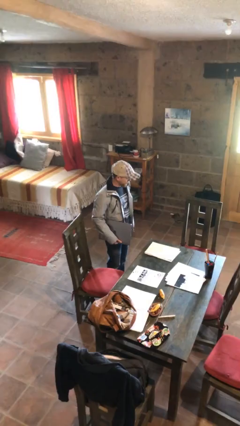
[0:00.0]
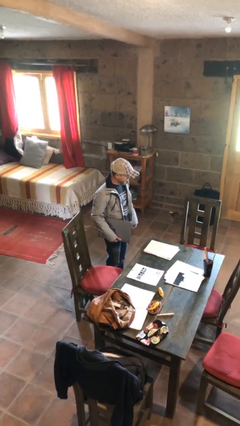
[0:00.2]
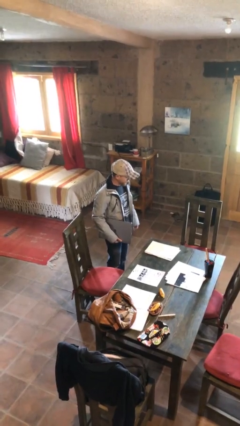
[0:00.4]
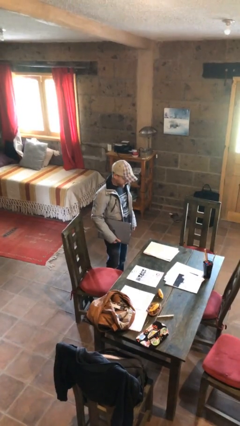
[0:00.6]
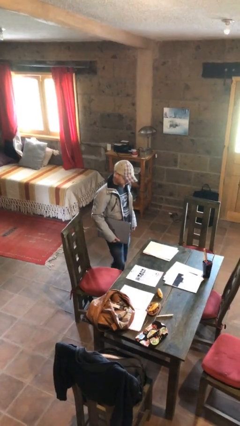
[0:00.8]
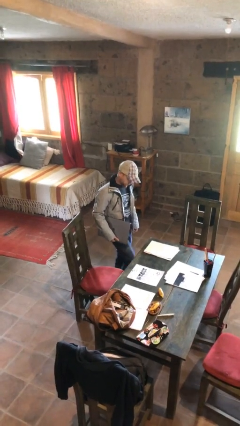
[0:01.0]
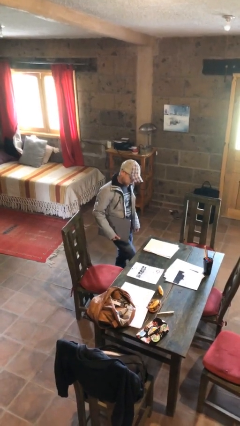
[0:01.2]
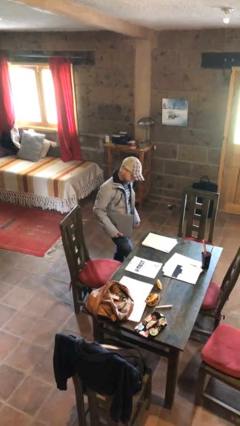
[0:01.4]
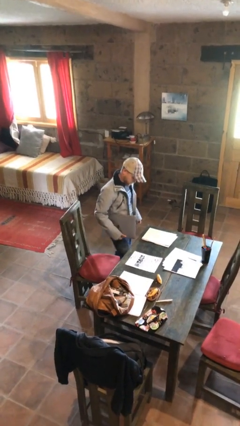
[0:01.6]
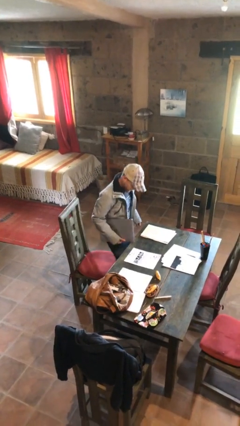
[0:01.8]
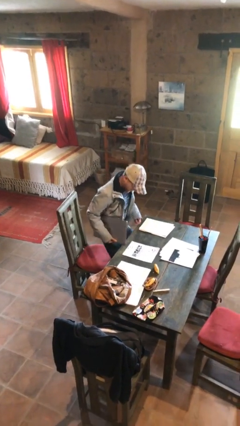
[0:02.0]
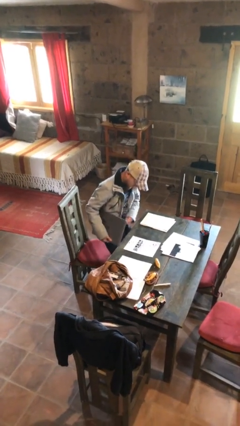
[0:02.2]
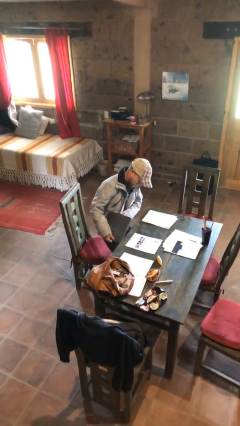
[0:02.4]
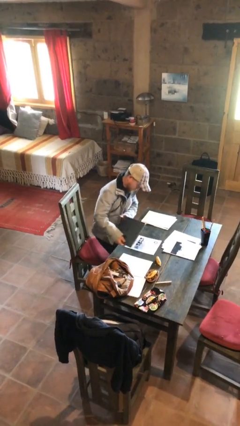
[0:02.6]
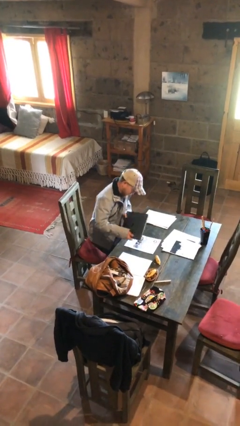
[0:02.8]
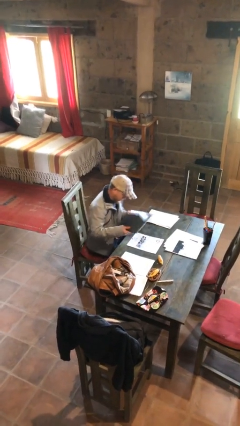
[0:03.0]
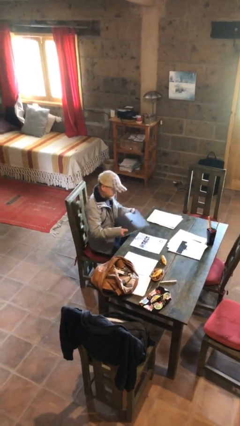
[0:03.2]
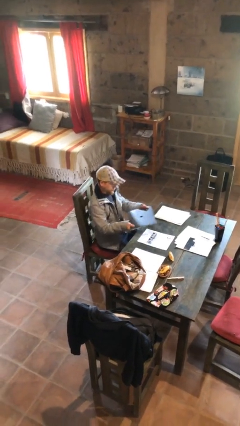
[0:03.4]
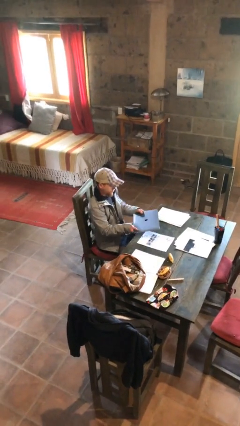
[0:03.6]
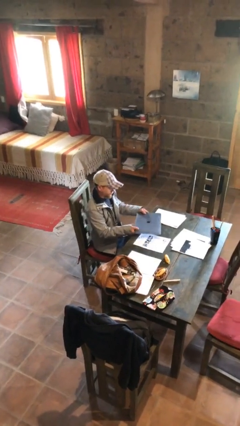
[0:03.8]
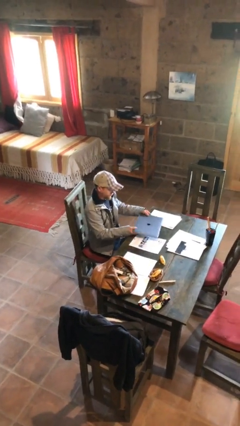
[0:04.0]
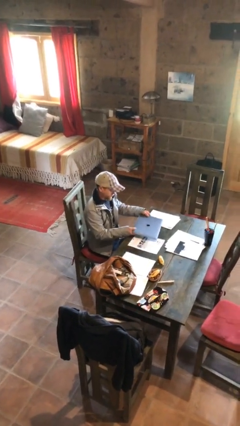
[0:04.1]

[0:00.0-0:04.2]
person sits down

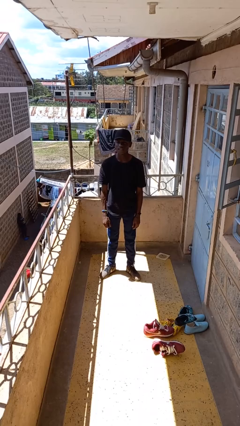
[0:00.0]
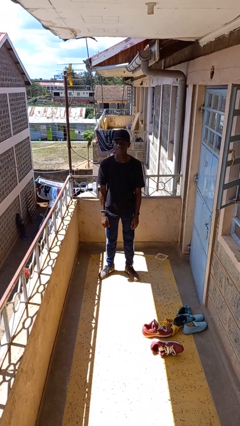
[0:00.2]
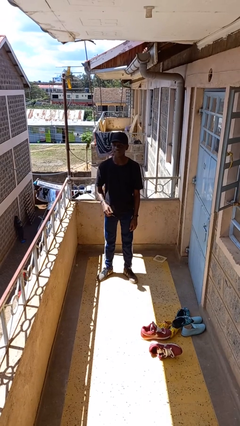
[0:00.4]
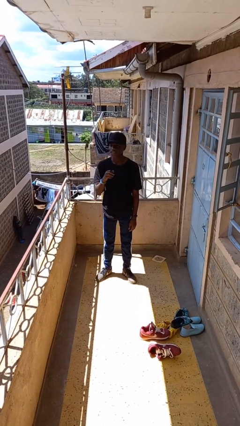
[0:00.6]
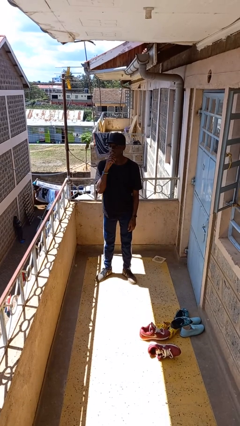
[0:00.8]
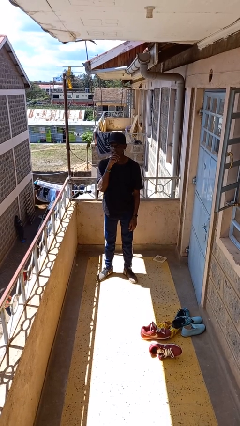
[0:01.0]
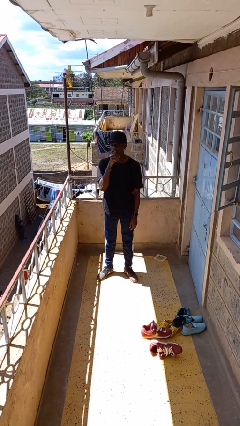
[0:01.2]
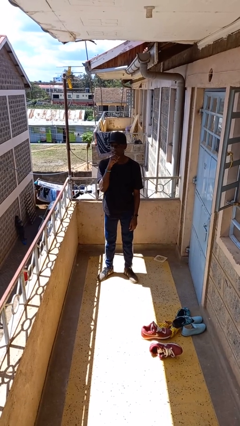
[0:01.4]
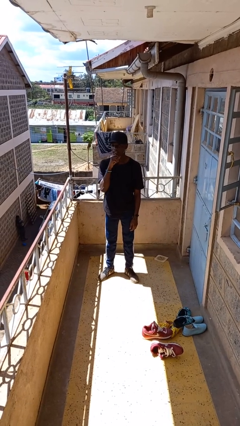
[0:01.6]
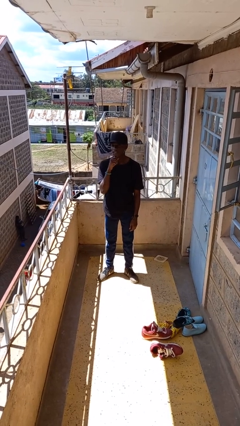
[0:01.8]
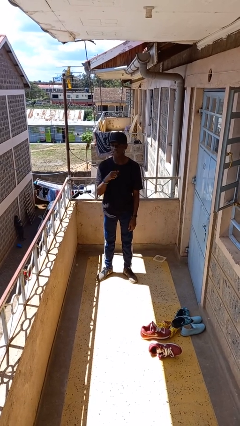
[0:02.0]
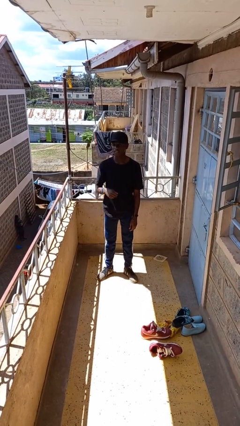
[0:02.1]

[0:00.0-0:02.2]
person strokes chin

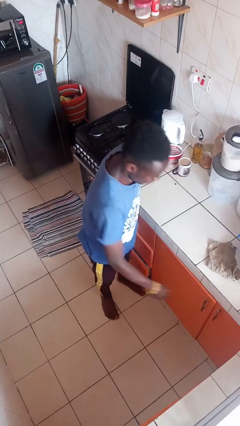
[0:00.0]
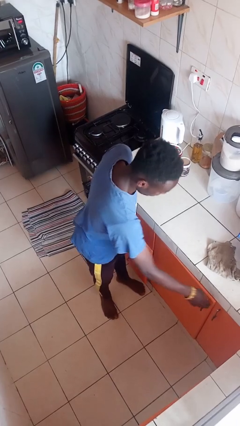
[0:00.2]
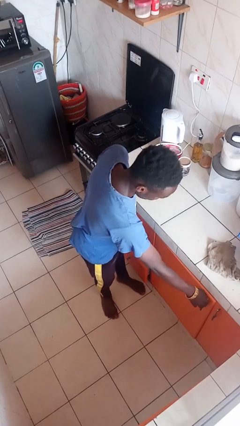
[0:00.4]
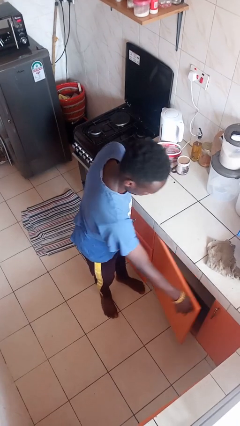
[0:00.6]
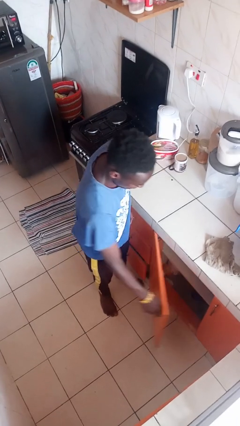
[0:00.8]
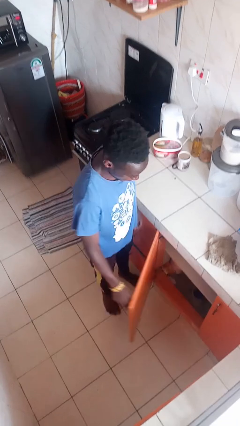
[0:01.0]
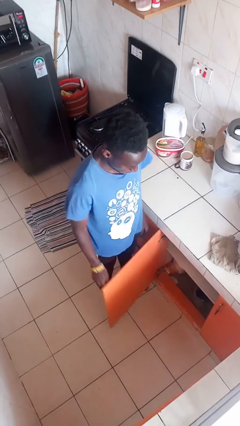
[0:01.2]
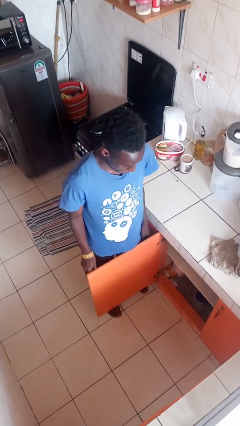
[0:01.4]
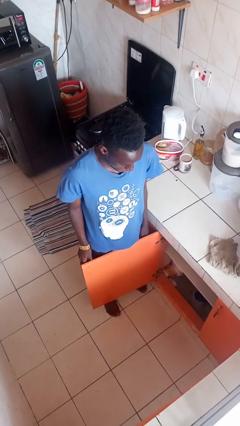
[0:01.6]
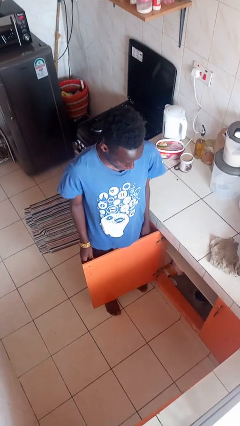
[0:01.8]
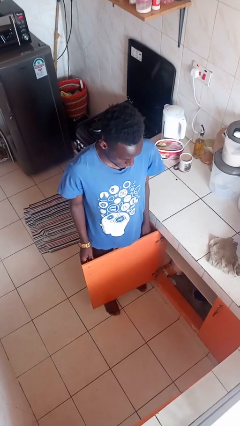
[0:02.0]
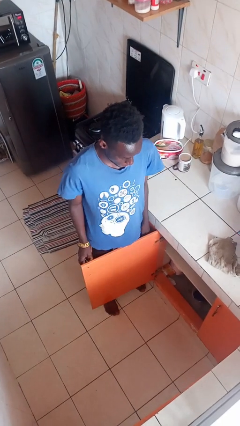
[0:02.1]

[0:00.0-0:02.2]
person opens cabinet

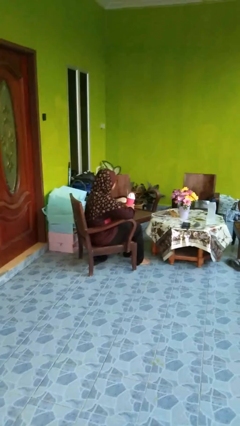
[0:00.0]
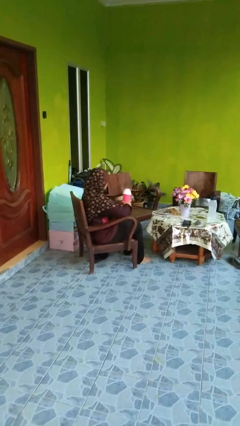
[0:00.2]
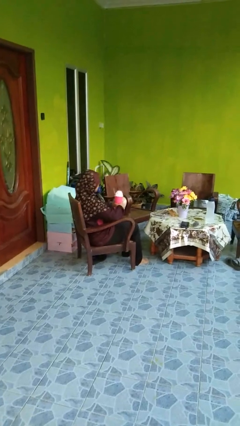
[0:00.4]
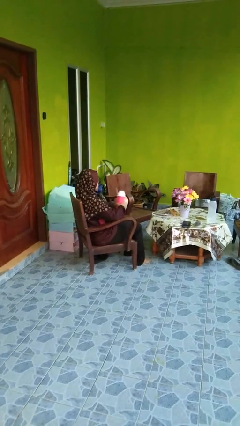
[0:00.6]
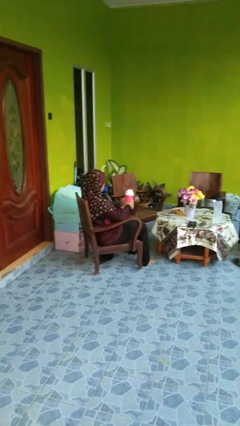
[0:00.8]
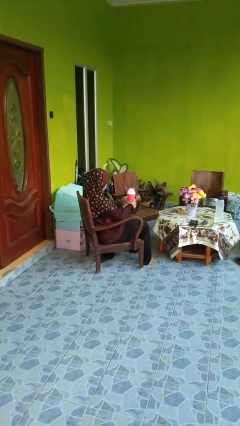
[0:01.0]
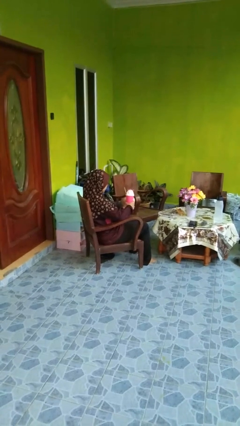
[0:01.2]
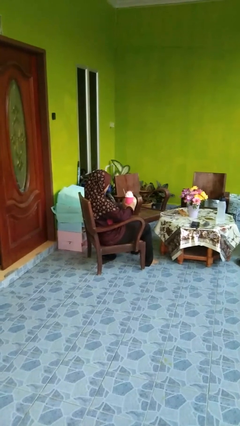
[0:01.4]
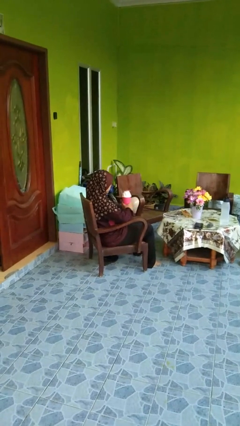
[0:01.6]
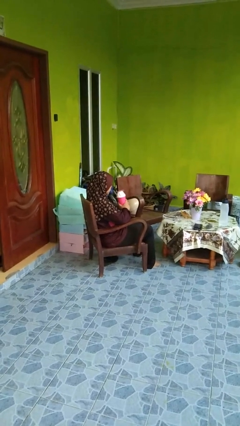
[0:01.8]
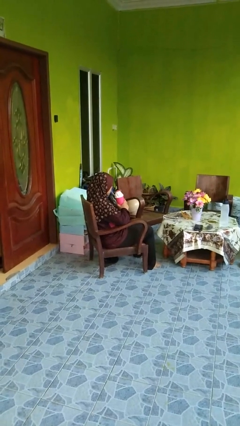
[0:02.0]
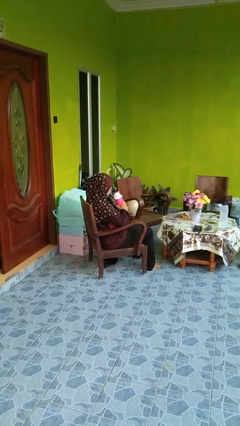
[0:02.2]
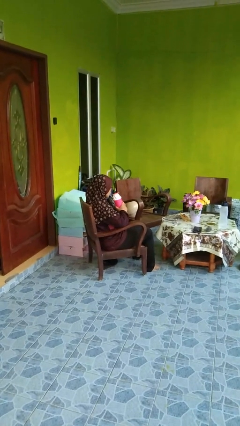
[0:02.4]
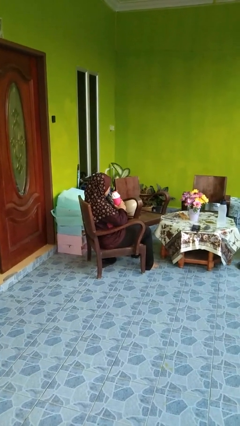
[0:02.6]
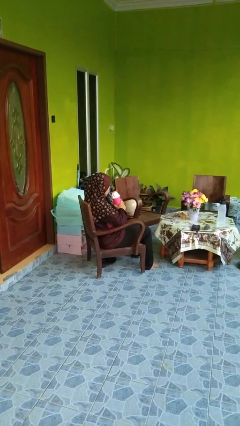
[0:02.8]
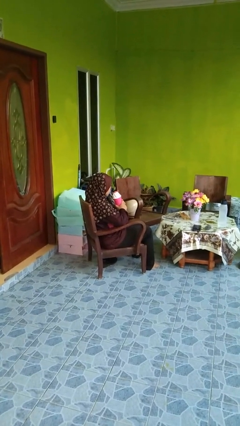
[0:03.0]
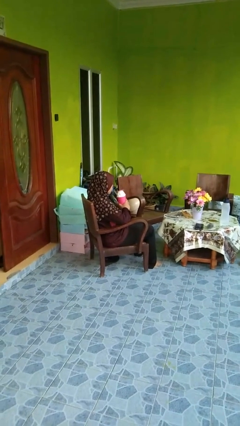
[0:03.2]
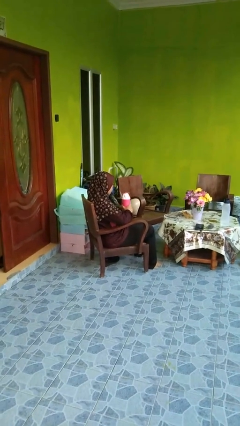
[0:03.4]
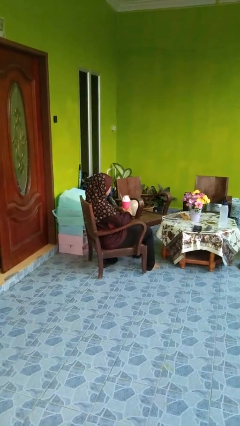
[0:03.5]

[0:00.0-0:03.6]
person drinks from straw

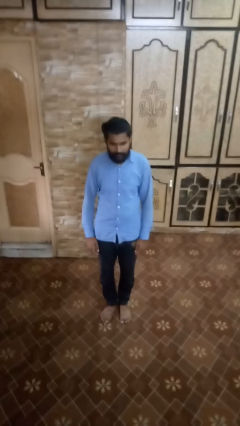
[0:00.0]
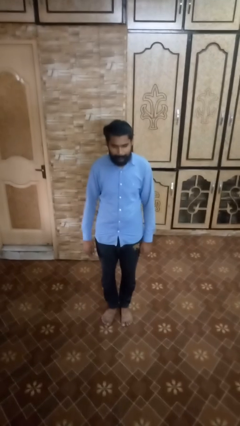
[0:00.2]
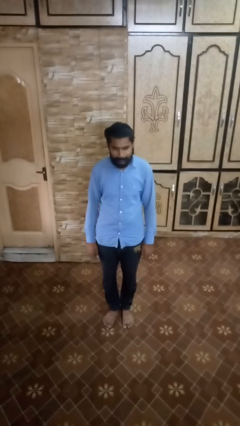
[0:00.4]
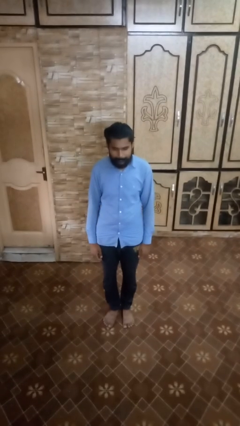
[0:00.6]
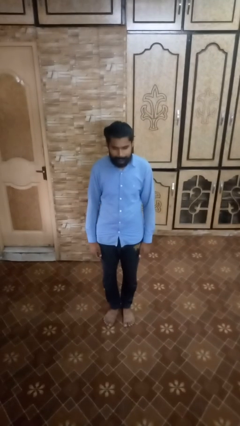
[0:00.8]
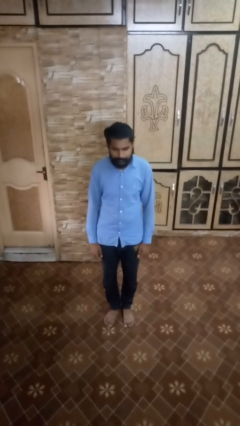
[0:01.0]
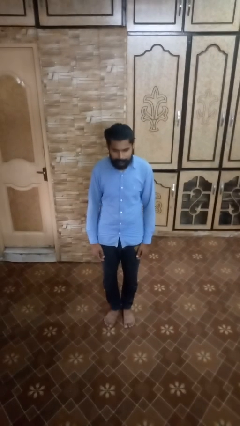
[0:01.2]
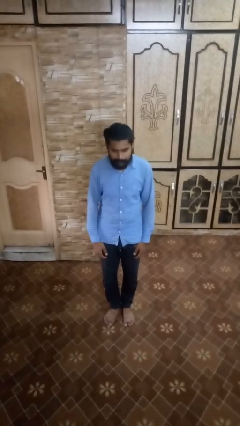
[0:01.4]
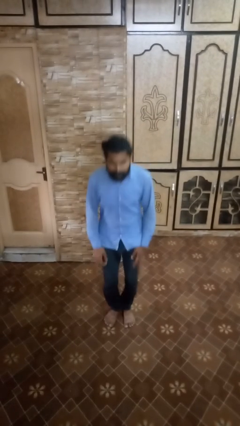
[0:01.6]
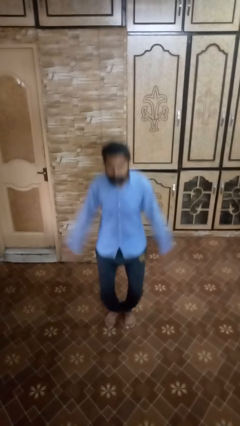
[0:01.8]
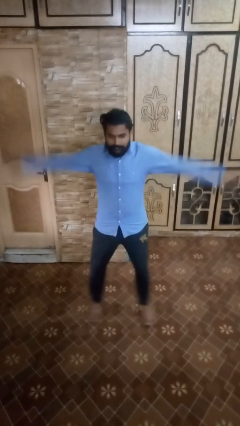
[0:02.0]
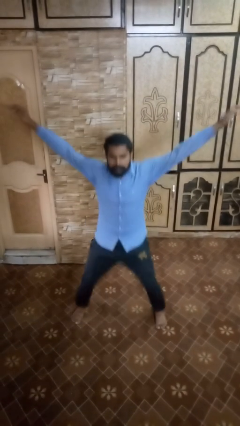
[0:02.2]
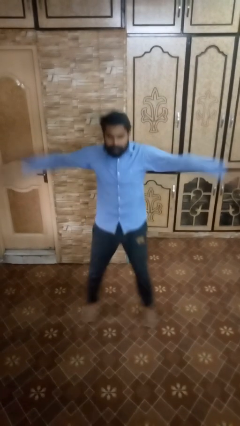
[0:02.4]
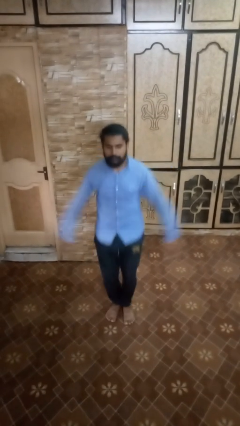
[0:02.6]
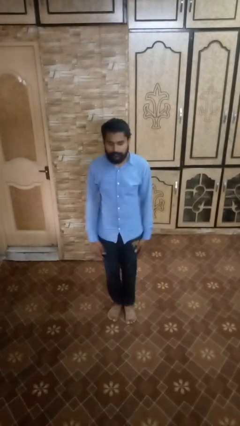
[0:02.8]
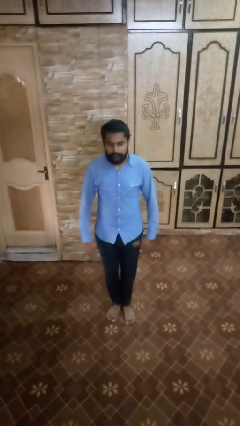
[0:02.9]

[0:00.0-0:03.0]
person exercises with jumping jacks

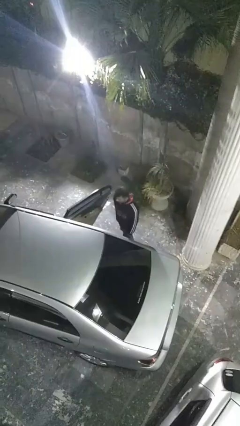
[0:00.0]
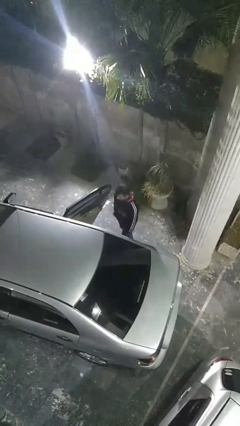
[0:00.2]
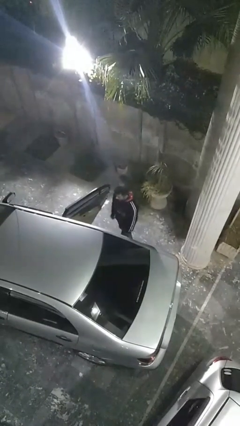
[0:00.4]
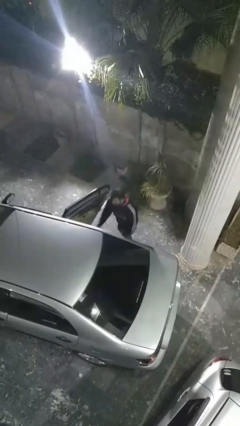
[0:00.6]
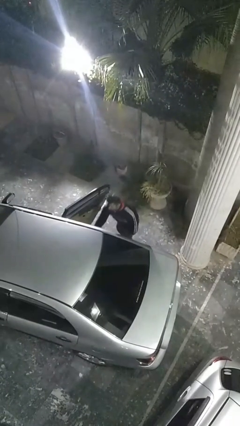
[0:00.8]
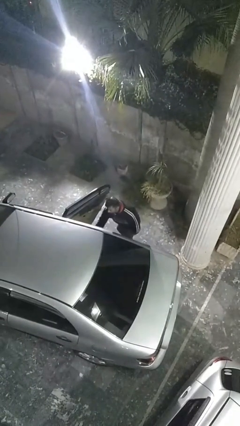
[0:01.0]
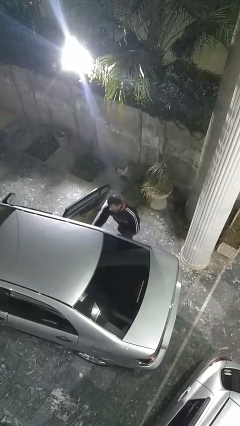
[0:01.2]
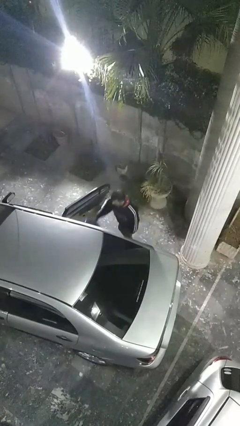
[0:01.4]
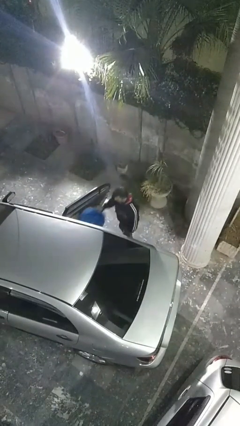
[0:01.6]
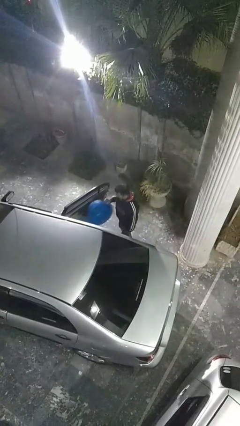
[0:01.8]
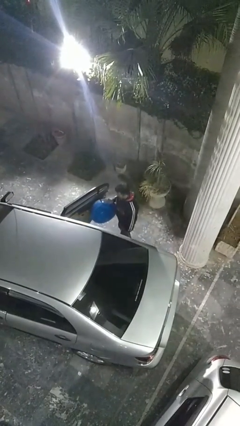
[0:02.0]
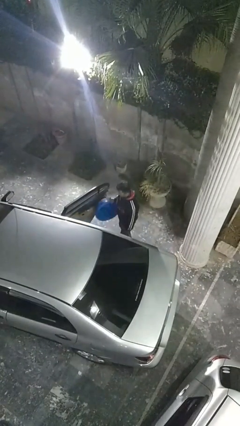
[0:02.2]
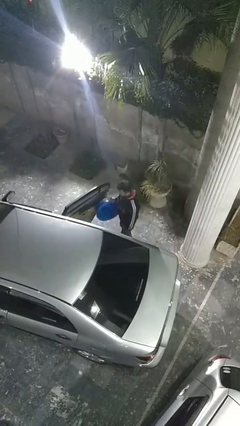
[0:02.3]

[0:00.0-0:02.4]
person unloads car
